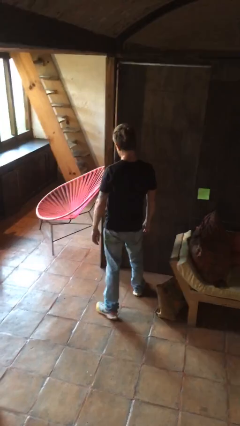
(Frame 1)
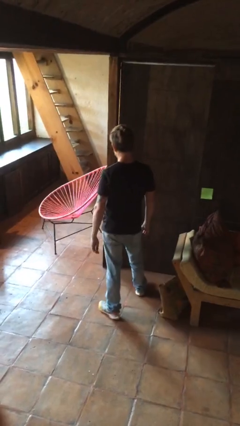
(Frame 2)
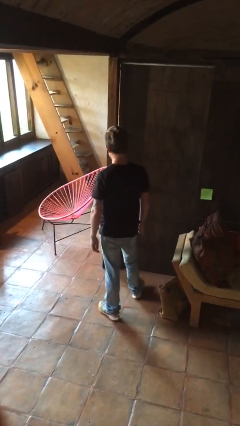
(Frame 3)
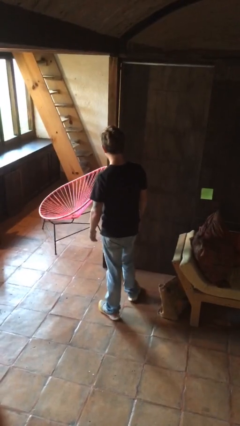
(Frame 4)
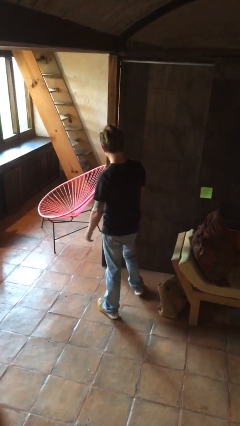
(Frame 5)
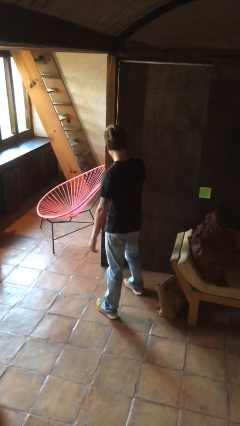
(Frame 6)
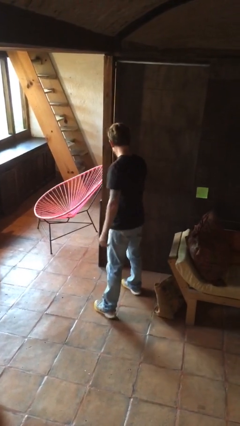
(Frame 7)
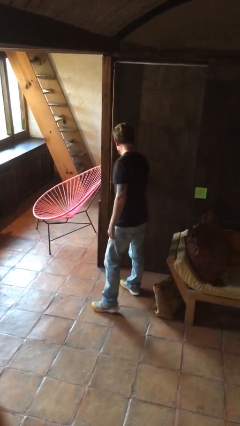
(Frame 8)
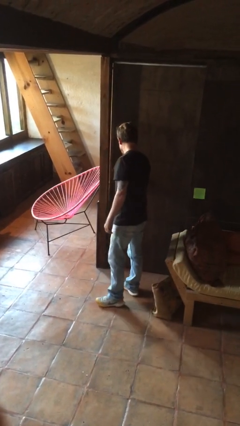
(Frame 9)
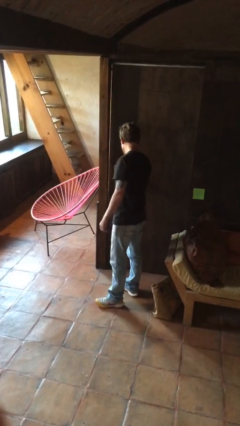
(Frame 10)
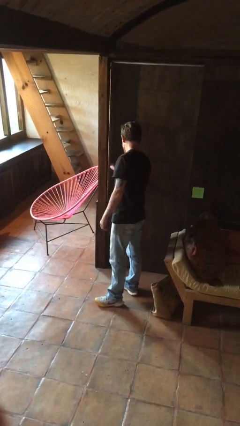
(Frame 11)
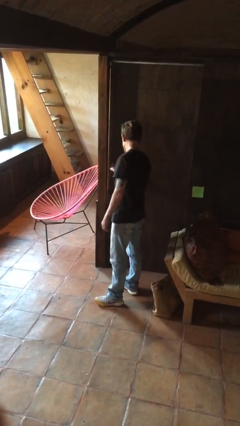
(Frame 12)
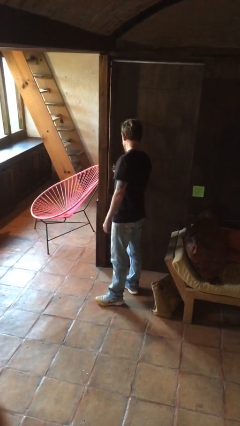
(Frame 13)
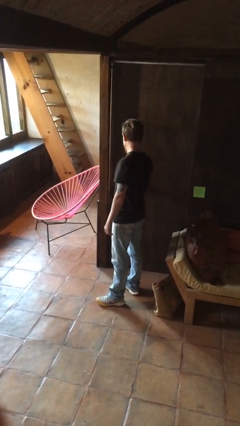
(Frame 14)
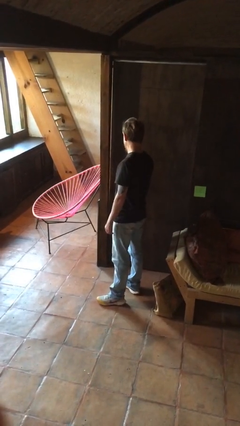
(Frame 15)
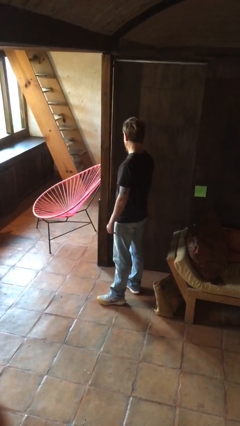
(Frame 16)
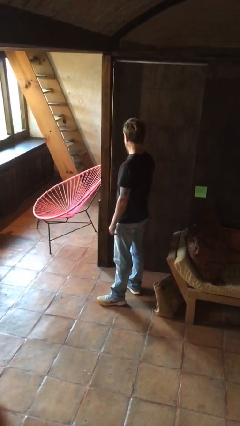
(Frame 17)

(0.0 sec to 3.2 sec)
person unlocks door with keys

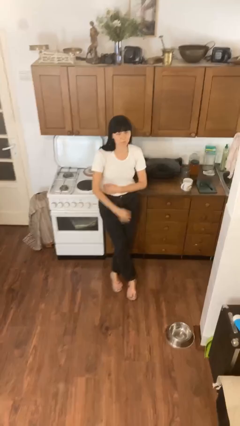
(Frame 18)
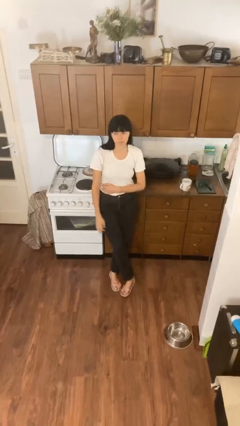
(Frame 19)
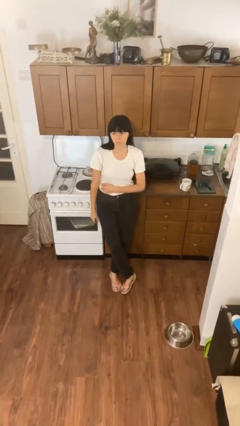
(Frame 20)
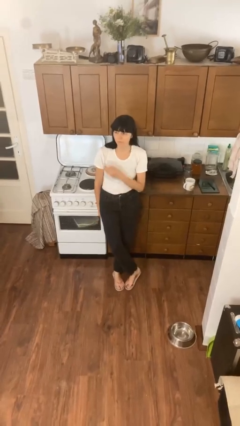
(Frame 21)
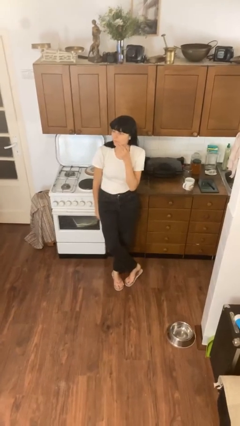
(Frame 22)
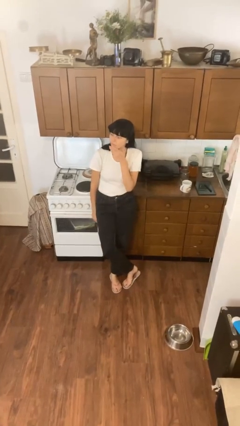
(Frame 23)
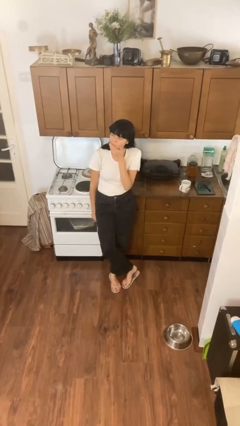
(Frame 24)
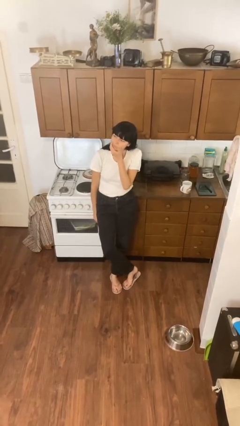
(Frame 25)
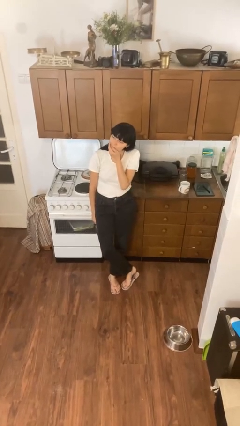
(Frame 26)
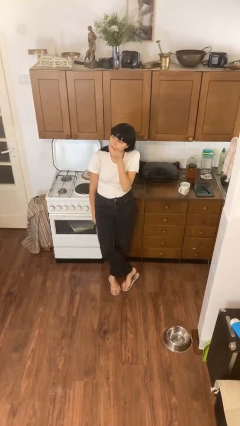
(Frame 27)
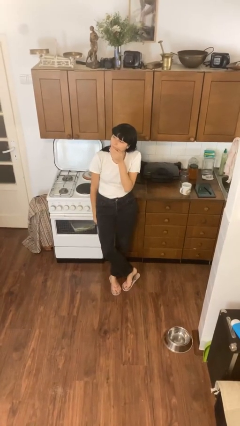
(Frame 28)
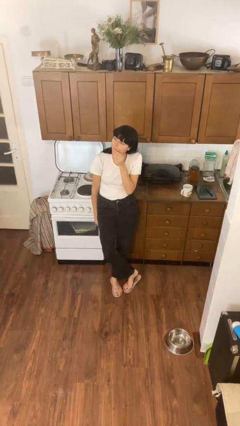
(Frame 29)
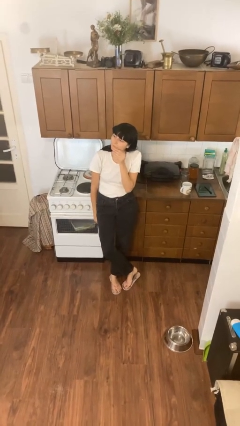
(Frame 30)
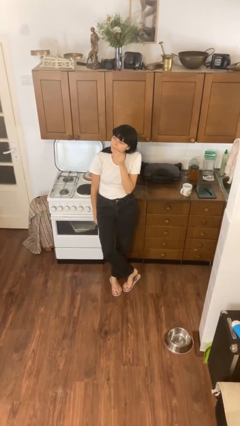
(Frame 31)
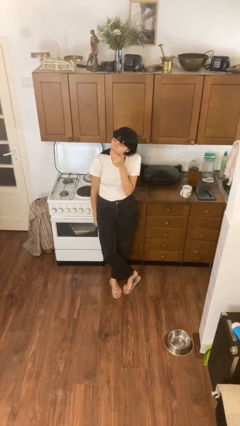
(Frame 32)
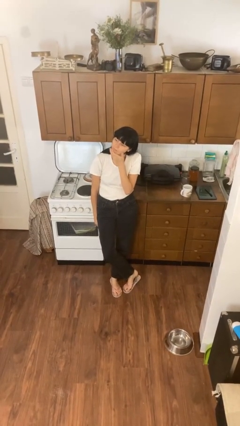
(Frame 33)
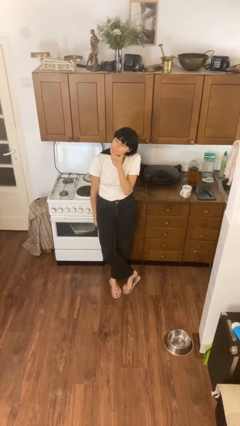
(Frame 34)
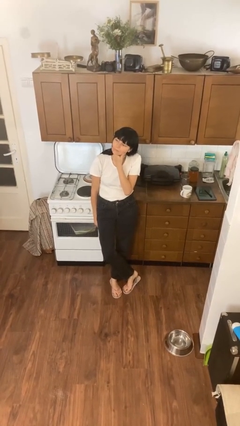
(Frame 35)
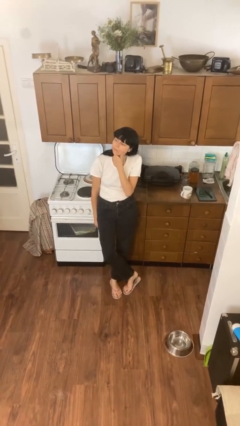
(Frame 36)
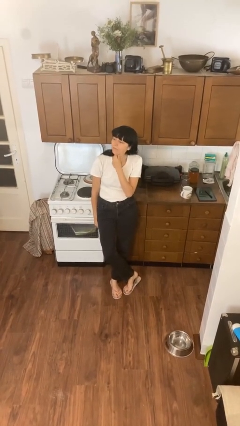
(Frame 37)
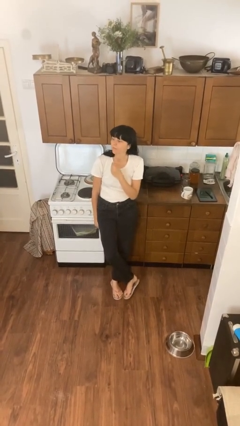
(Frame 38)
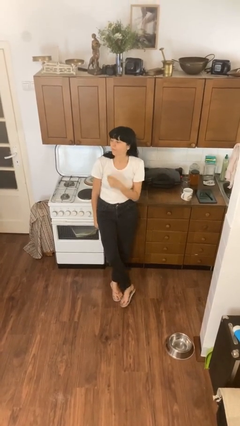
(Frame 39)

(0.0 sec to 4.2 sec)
person strokes chin

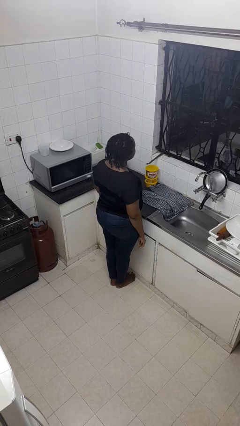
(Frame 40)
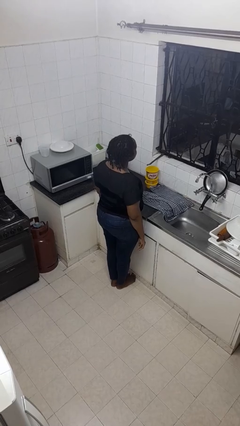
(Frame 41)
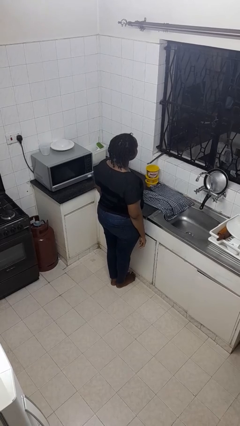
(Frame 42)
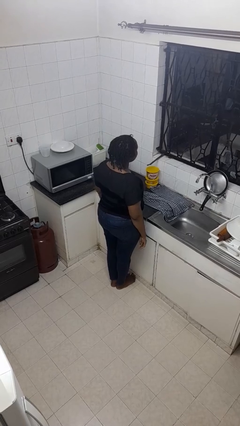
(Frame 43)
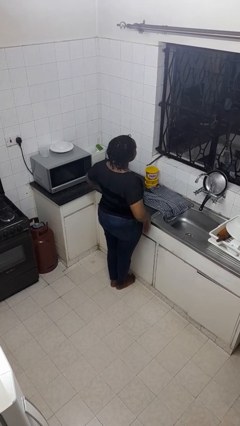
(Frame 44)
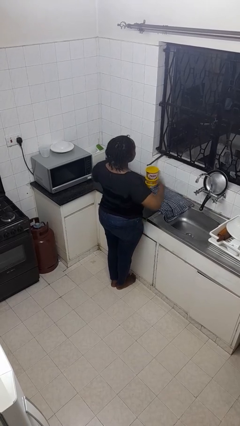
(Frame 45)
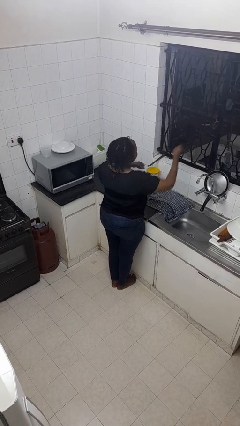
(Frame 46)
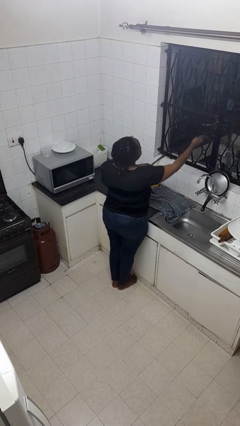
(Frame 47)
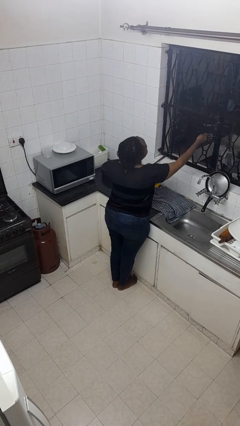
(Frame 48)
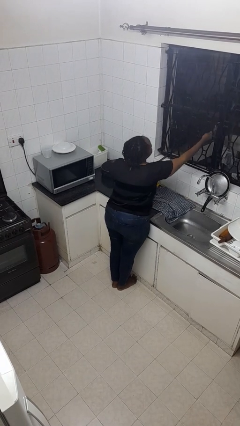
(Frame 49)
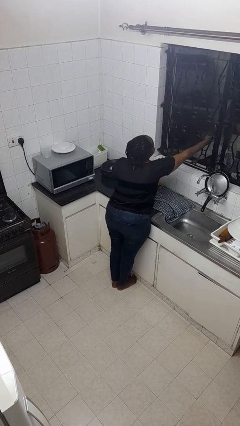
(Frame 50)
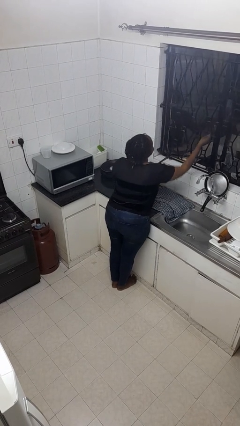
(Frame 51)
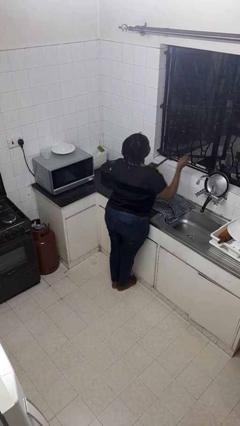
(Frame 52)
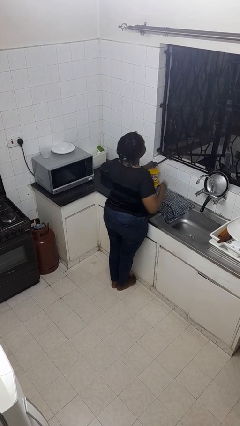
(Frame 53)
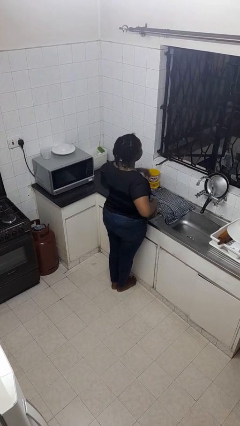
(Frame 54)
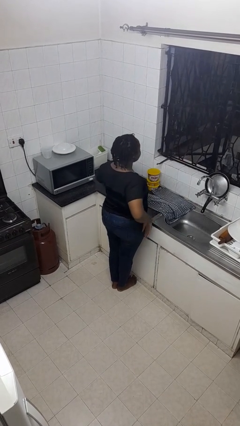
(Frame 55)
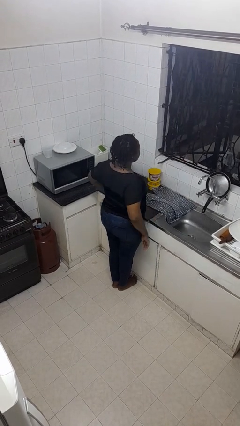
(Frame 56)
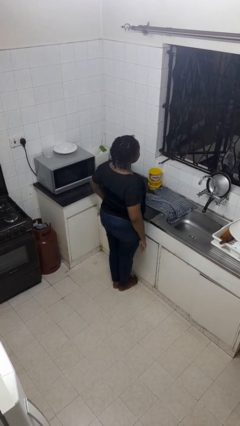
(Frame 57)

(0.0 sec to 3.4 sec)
person opens home window

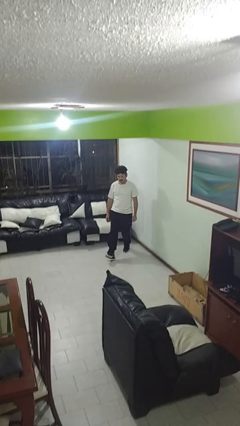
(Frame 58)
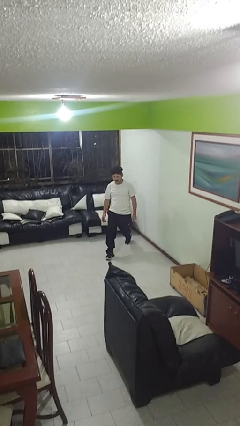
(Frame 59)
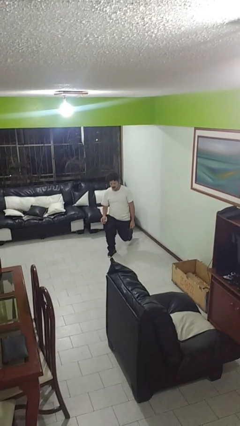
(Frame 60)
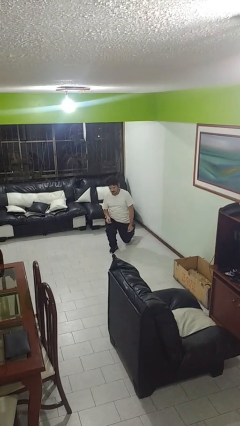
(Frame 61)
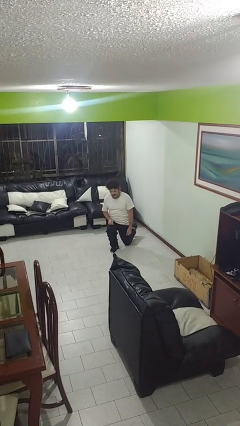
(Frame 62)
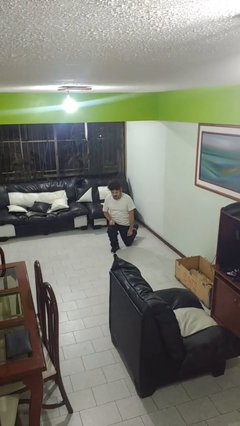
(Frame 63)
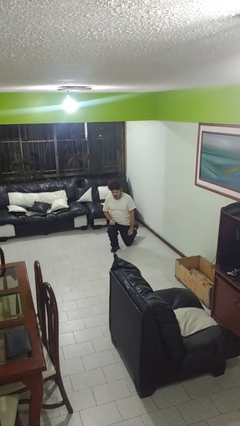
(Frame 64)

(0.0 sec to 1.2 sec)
person kneels

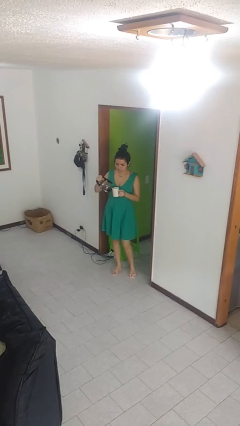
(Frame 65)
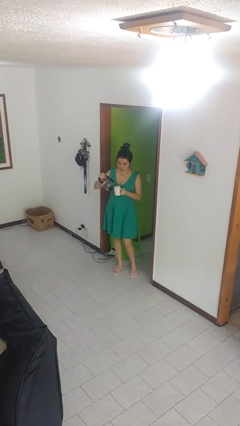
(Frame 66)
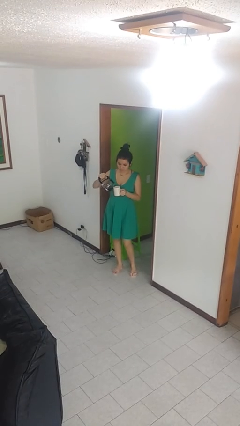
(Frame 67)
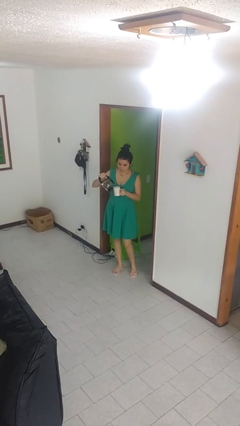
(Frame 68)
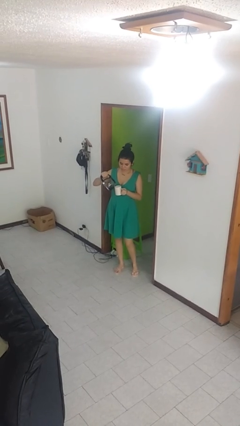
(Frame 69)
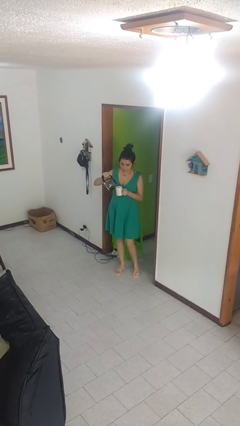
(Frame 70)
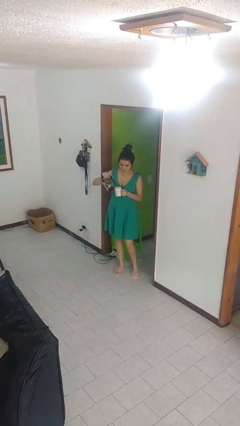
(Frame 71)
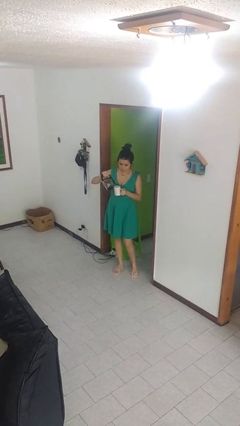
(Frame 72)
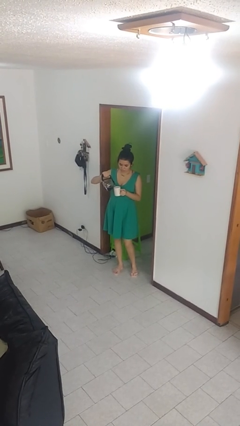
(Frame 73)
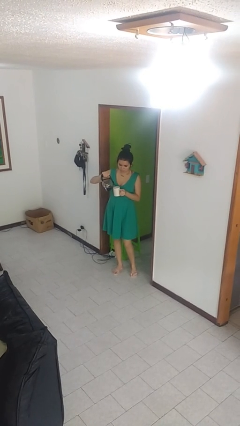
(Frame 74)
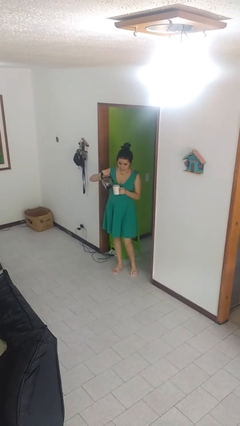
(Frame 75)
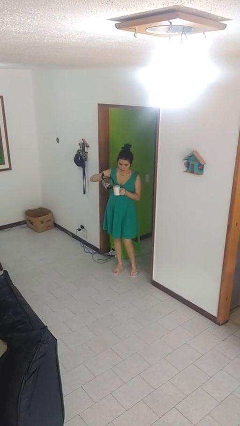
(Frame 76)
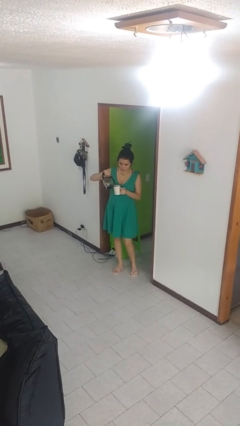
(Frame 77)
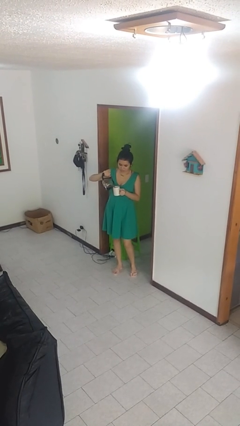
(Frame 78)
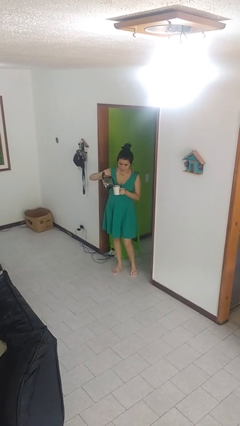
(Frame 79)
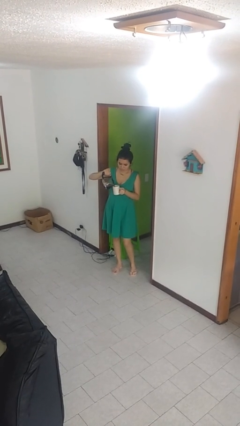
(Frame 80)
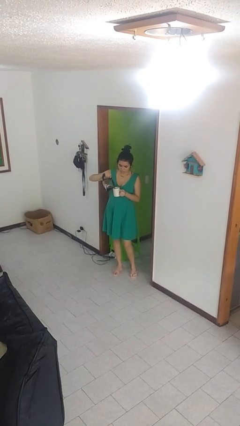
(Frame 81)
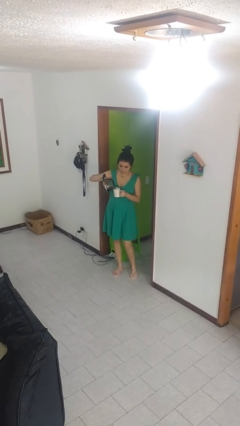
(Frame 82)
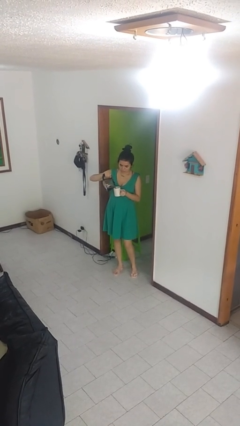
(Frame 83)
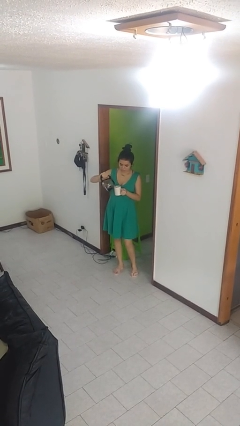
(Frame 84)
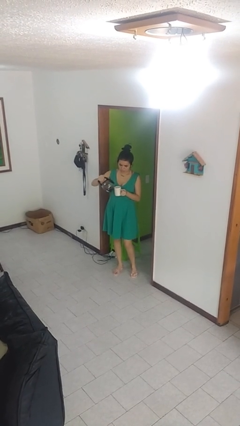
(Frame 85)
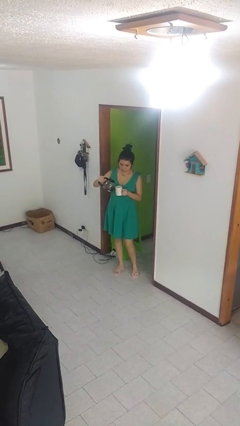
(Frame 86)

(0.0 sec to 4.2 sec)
person pours coffee into mug

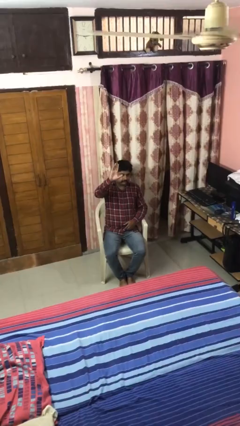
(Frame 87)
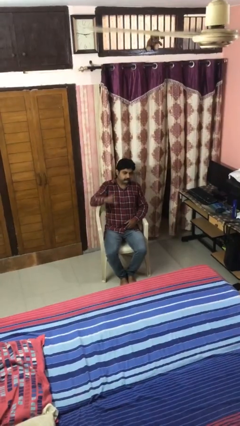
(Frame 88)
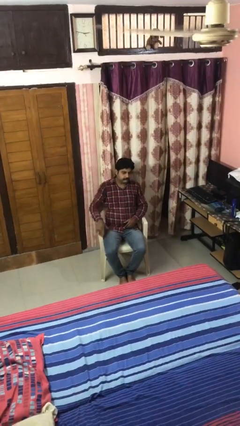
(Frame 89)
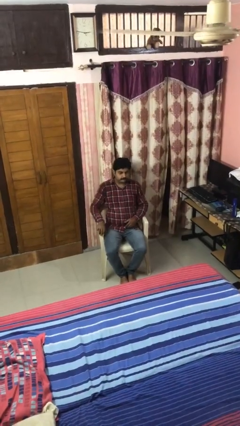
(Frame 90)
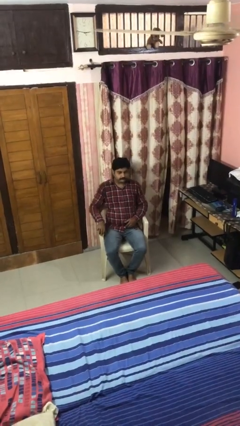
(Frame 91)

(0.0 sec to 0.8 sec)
person gestures lower hand
